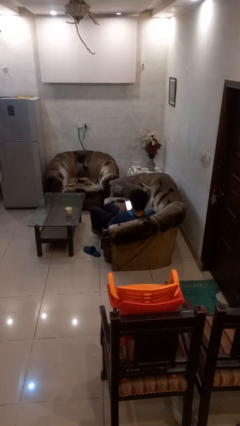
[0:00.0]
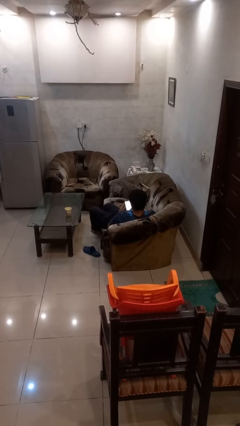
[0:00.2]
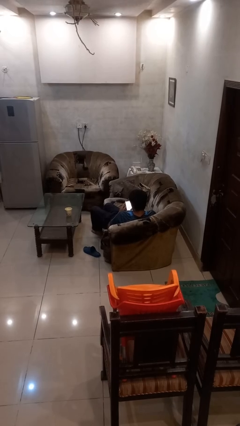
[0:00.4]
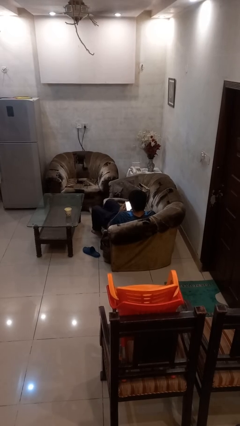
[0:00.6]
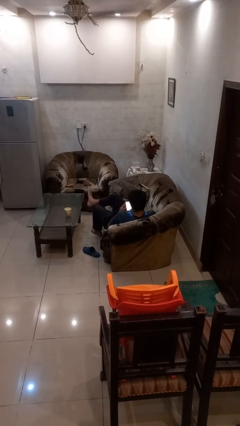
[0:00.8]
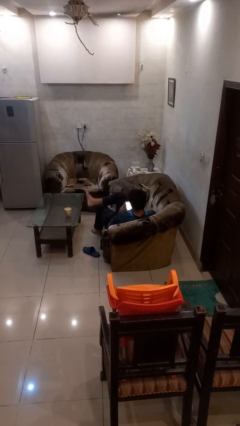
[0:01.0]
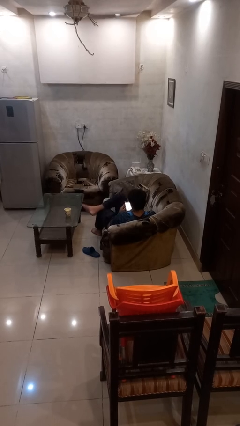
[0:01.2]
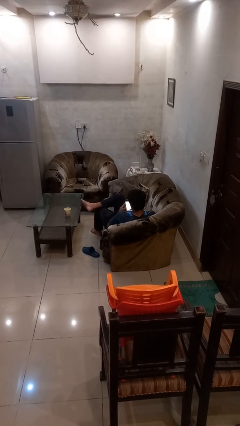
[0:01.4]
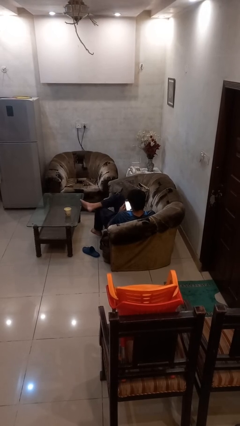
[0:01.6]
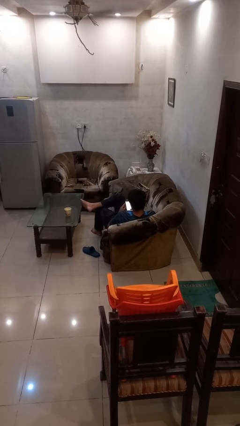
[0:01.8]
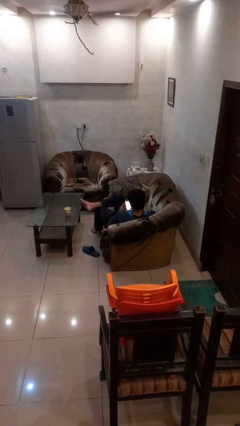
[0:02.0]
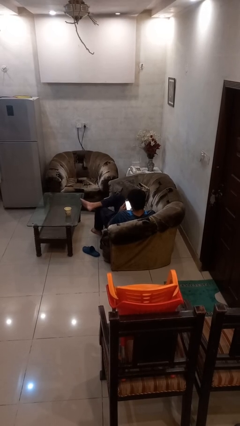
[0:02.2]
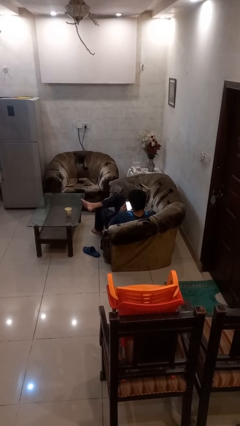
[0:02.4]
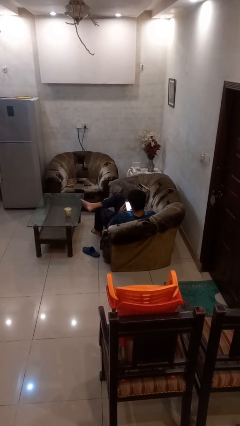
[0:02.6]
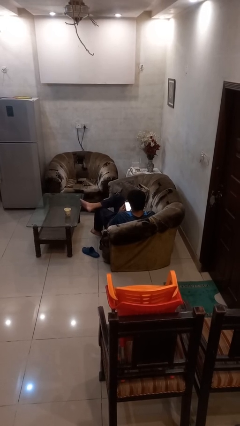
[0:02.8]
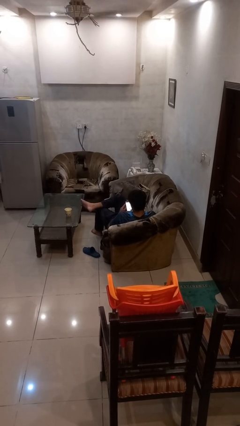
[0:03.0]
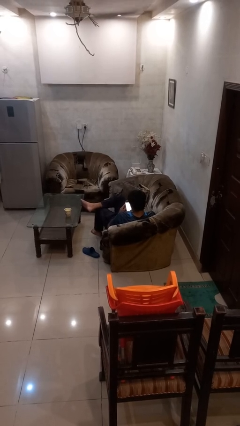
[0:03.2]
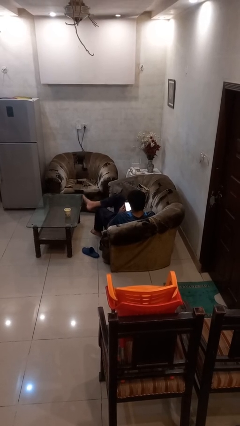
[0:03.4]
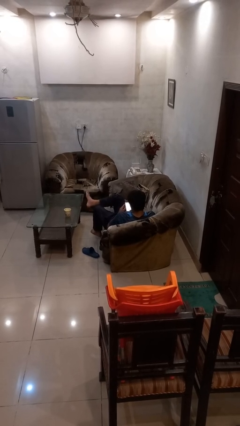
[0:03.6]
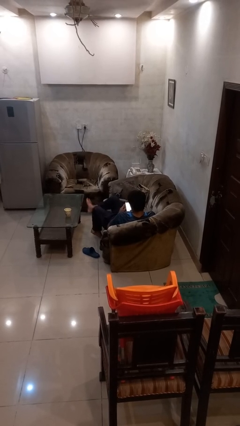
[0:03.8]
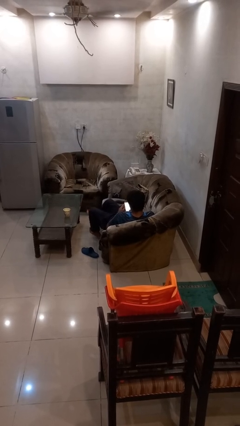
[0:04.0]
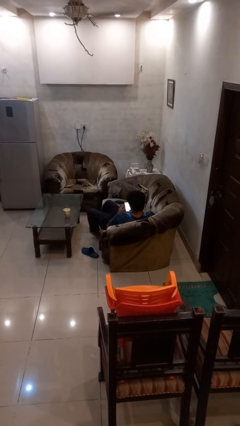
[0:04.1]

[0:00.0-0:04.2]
person crosses legs

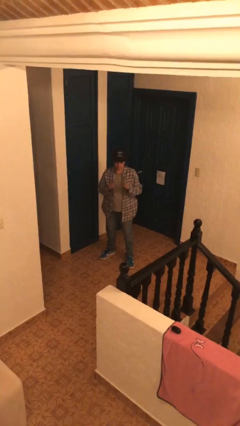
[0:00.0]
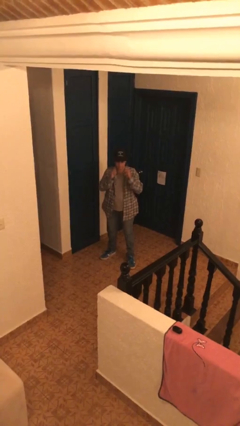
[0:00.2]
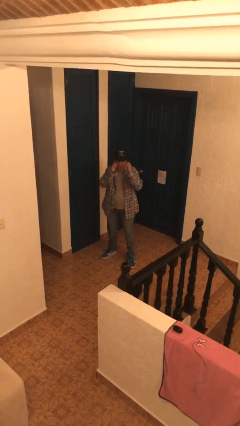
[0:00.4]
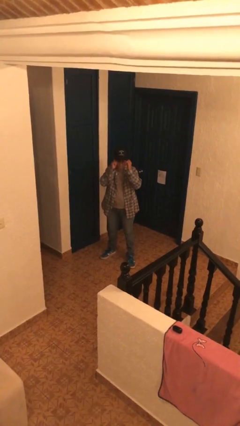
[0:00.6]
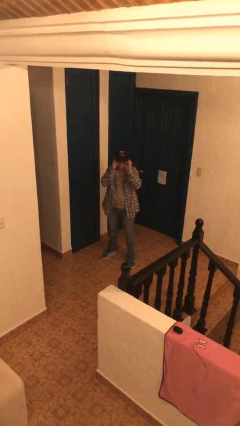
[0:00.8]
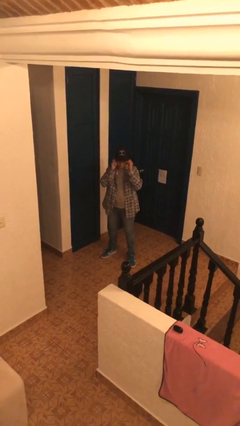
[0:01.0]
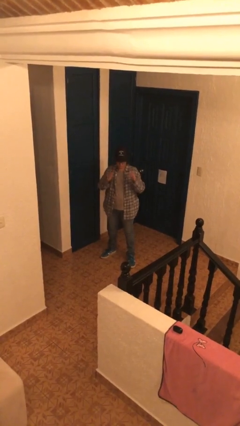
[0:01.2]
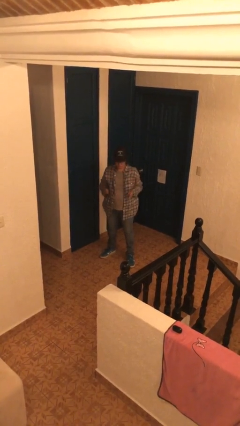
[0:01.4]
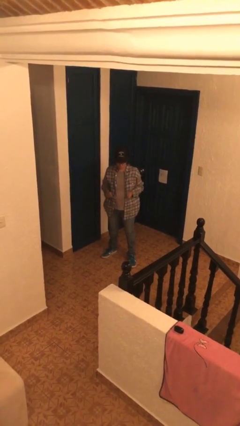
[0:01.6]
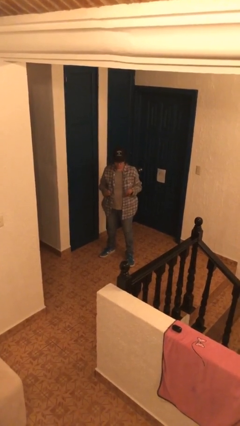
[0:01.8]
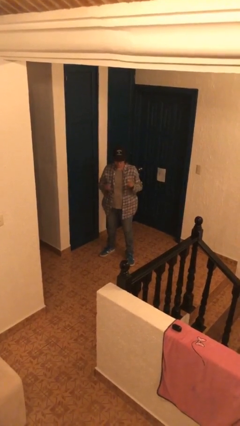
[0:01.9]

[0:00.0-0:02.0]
person puts on glasses

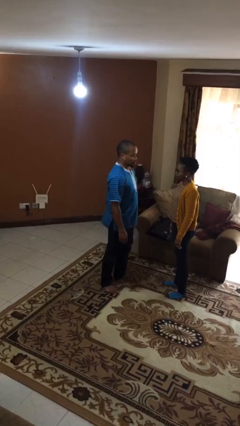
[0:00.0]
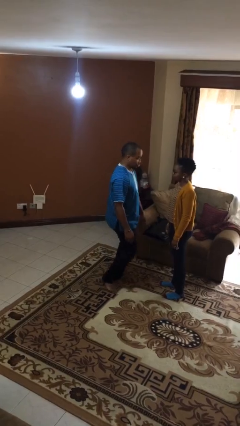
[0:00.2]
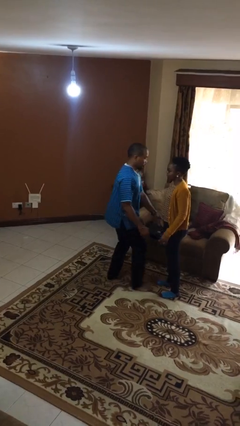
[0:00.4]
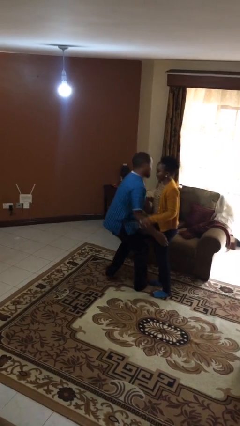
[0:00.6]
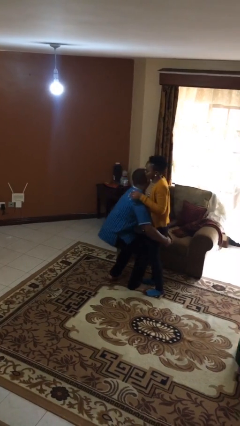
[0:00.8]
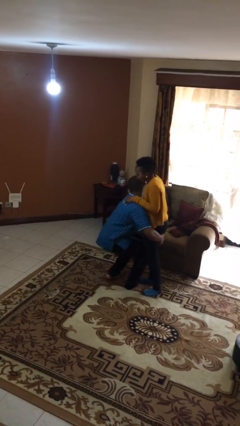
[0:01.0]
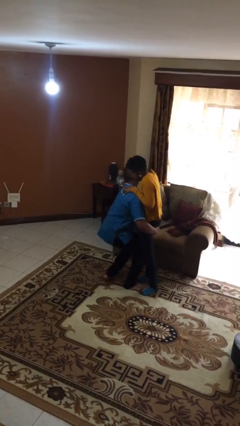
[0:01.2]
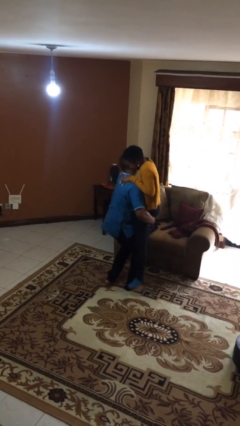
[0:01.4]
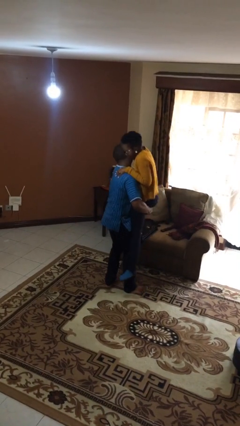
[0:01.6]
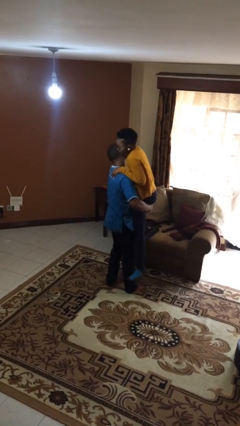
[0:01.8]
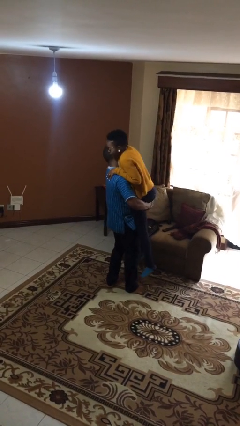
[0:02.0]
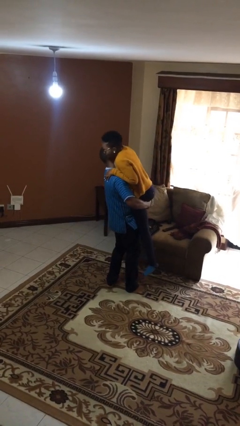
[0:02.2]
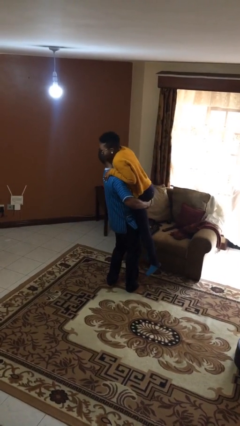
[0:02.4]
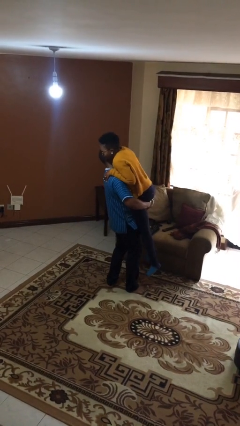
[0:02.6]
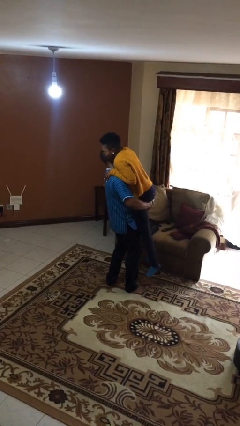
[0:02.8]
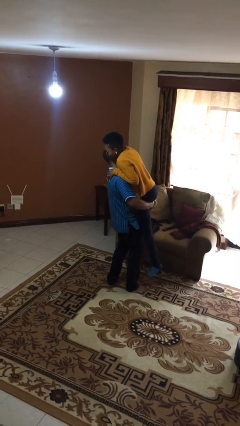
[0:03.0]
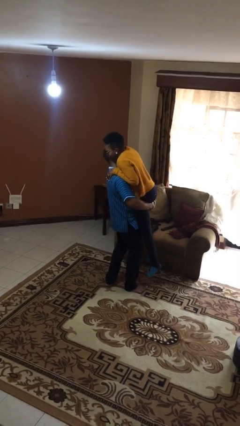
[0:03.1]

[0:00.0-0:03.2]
person picks up person

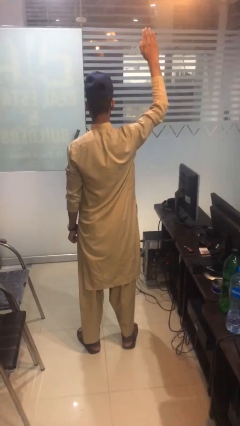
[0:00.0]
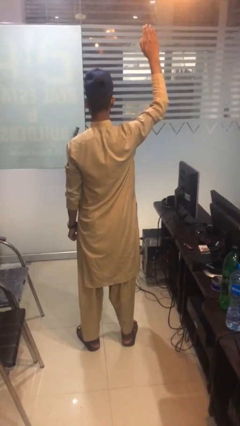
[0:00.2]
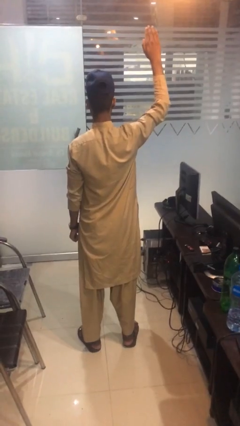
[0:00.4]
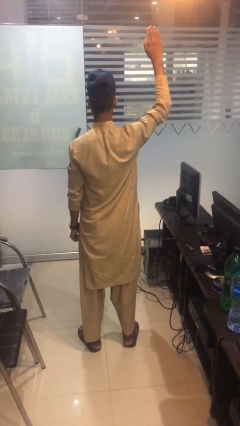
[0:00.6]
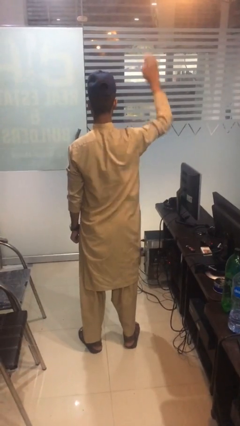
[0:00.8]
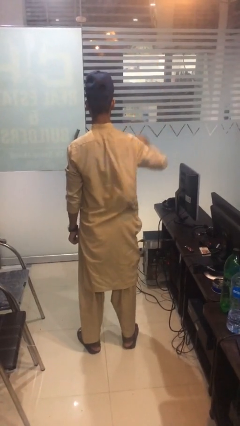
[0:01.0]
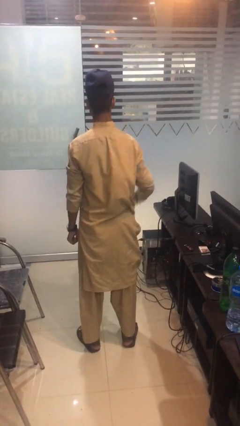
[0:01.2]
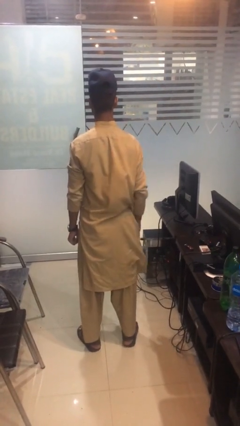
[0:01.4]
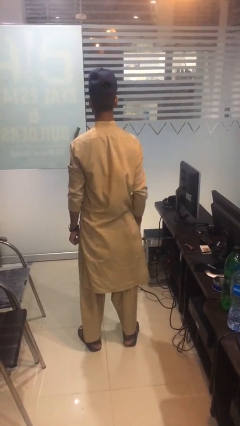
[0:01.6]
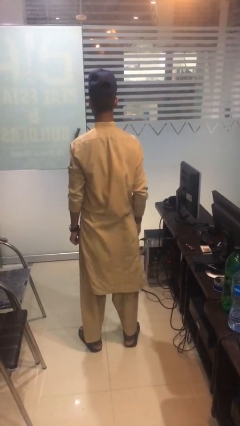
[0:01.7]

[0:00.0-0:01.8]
person gestures lower hand

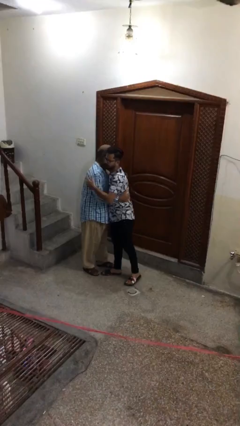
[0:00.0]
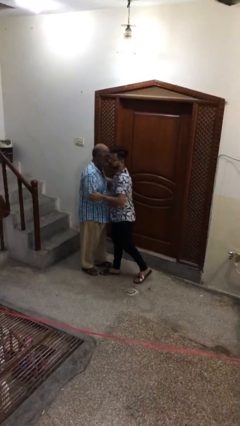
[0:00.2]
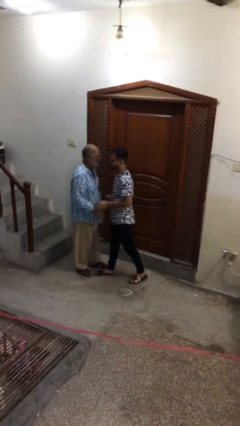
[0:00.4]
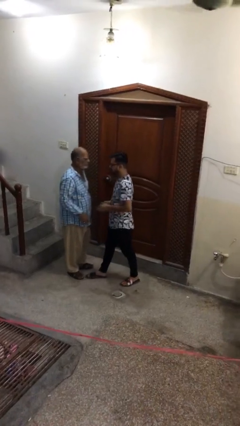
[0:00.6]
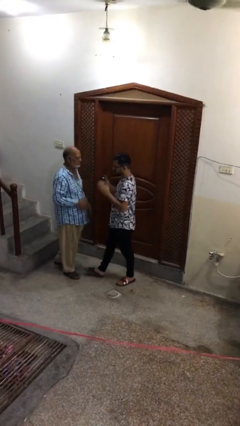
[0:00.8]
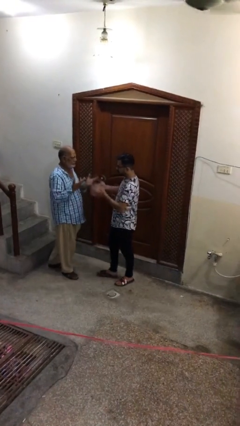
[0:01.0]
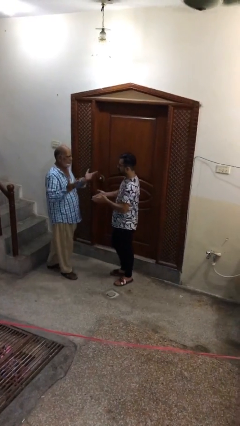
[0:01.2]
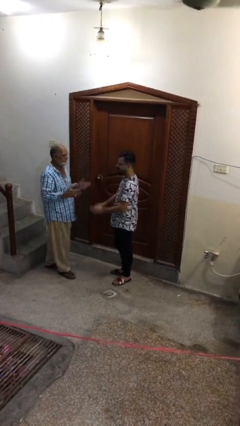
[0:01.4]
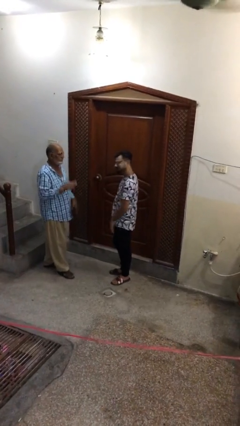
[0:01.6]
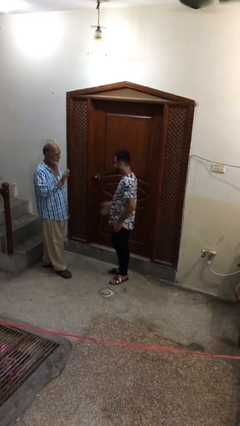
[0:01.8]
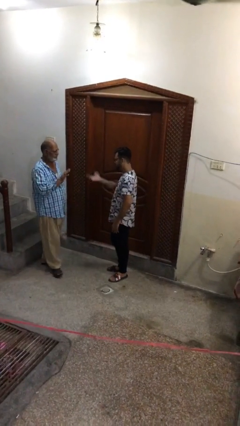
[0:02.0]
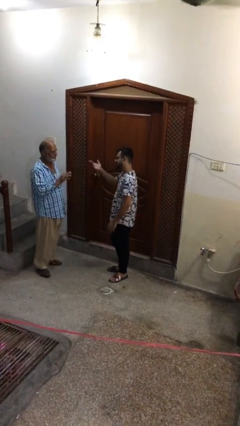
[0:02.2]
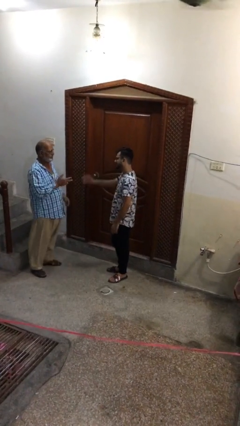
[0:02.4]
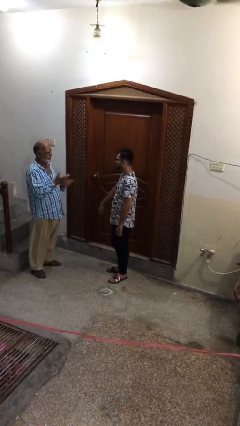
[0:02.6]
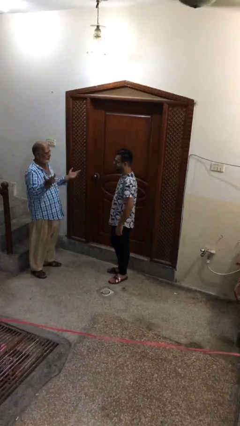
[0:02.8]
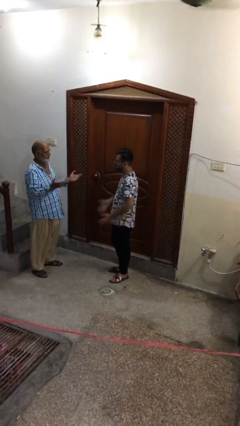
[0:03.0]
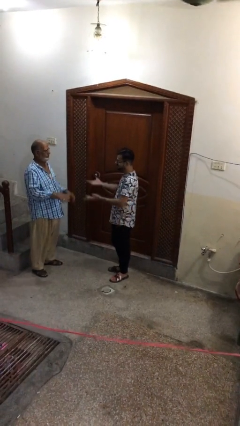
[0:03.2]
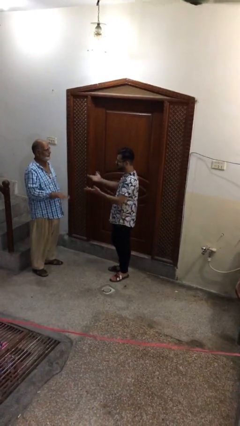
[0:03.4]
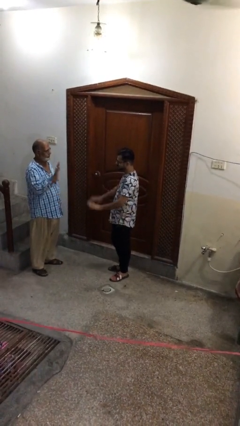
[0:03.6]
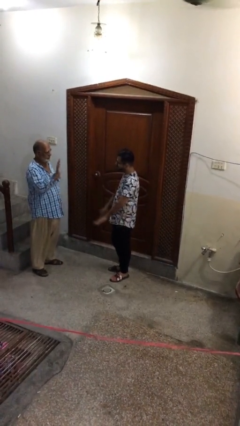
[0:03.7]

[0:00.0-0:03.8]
person talks to person

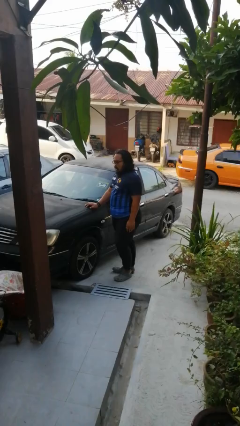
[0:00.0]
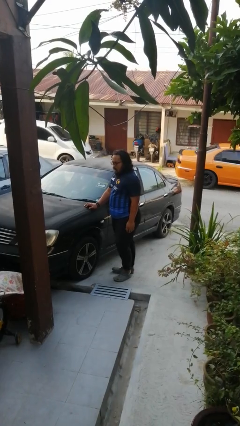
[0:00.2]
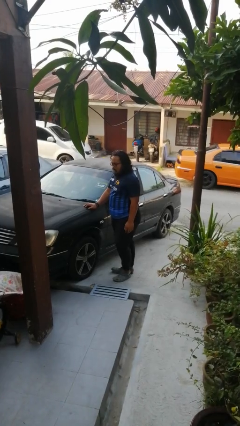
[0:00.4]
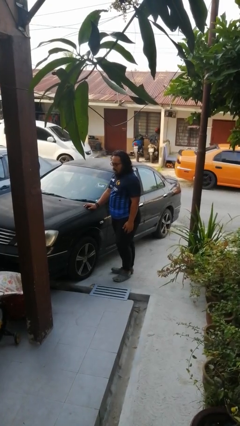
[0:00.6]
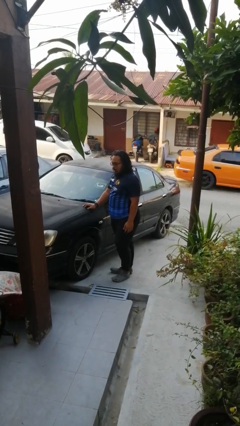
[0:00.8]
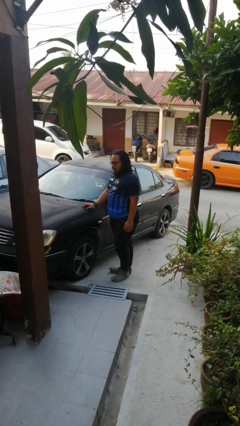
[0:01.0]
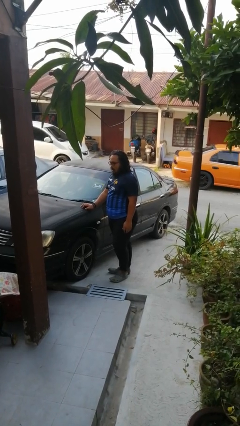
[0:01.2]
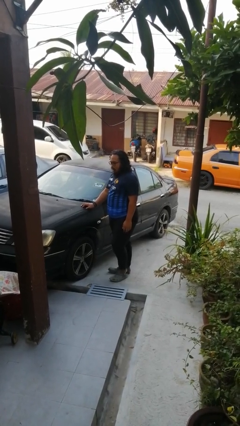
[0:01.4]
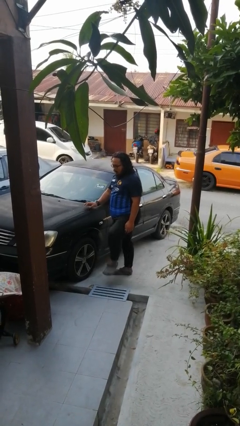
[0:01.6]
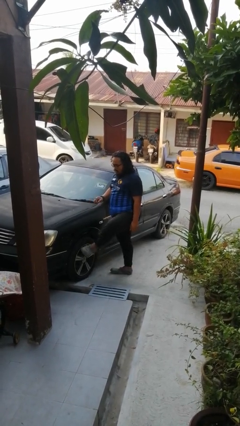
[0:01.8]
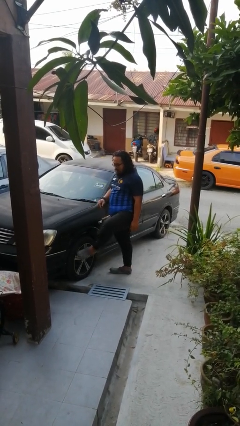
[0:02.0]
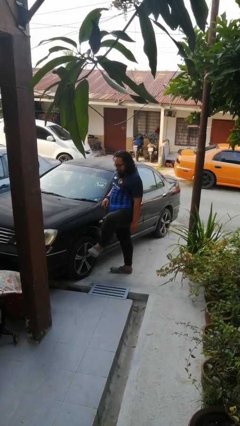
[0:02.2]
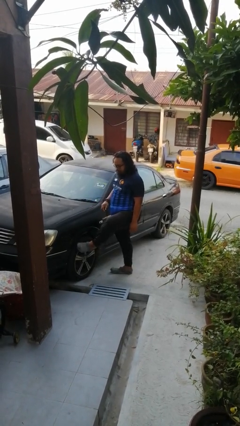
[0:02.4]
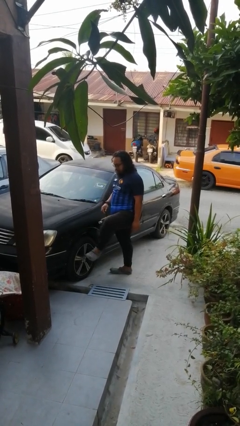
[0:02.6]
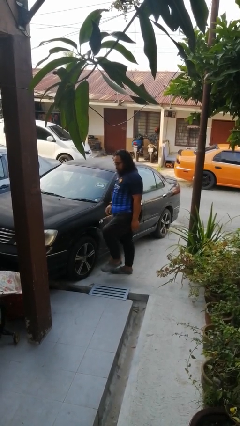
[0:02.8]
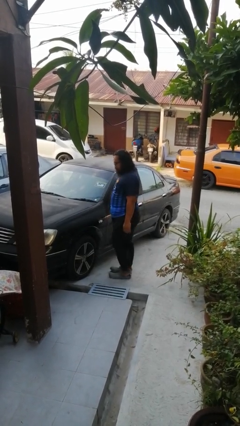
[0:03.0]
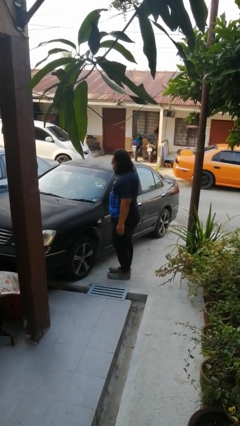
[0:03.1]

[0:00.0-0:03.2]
person kicks car tires
